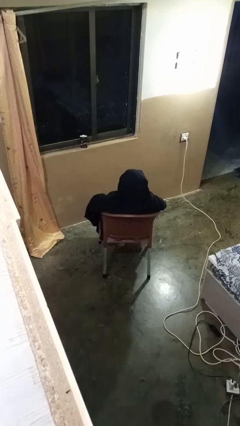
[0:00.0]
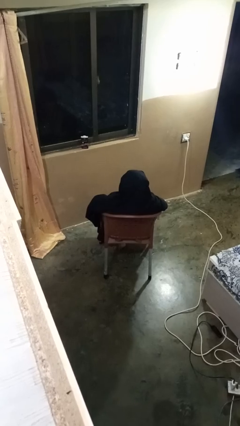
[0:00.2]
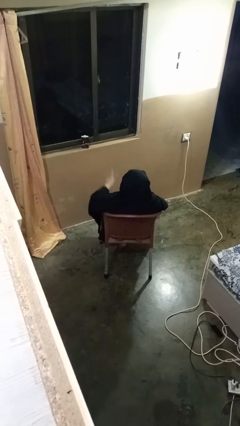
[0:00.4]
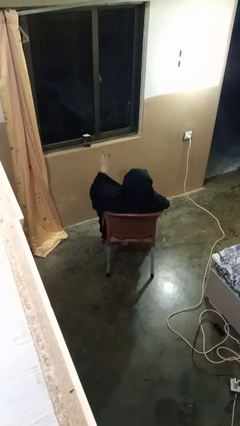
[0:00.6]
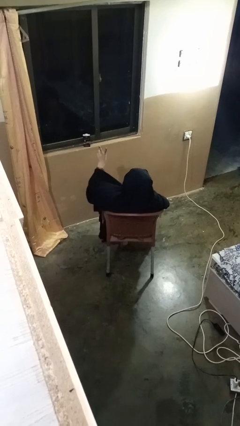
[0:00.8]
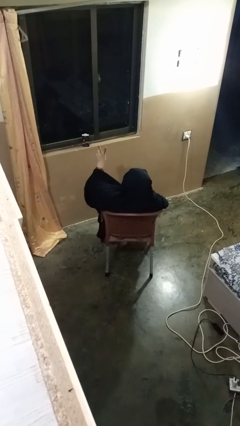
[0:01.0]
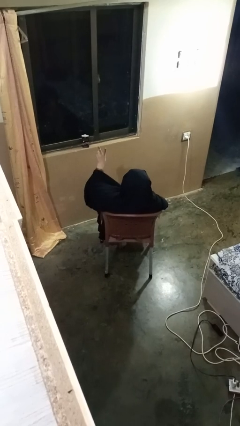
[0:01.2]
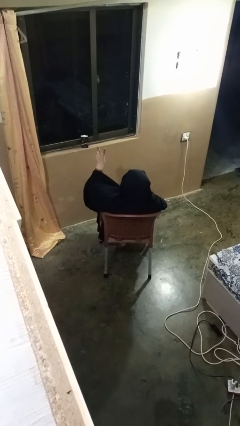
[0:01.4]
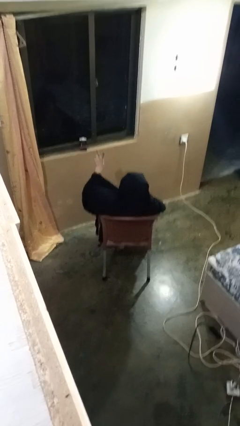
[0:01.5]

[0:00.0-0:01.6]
person gestures peace

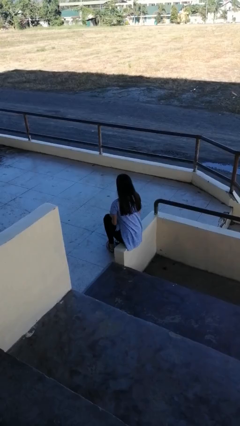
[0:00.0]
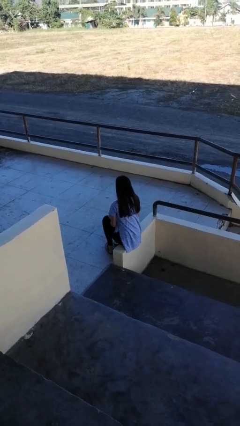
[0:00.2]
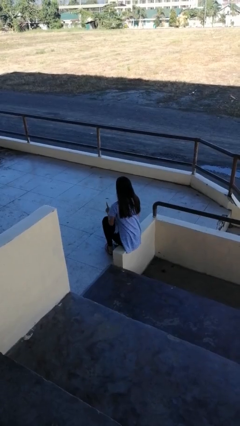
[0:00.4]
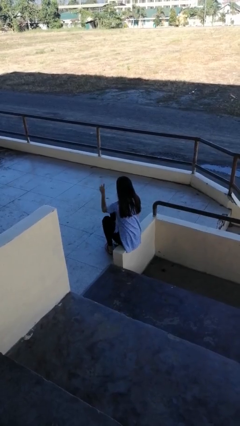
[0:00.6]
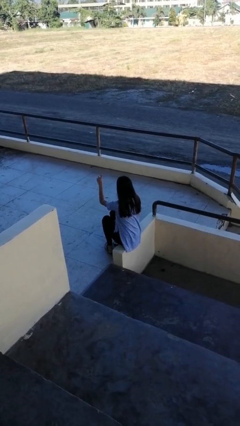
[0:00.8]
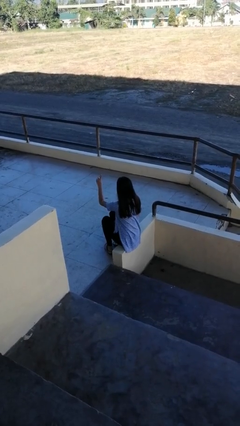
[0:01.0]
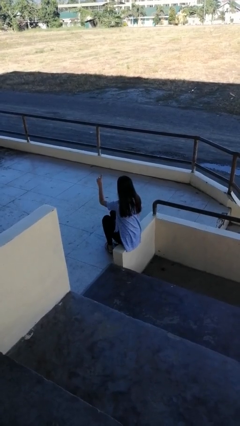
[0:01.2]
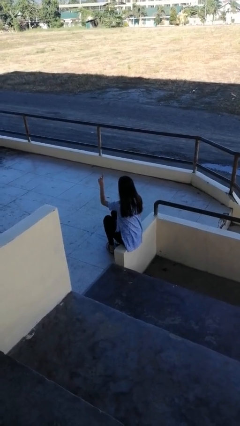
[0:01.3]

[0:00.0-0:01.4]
person gestures number one

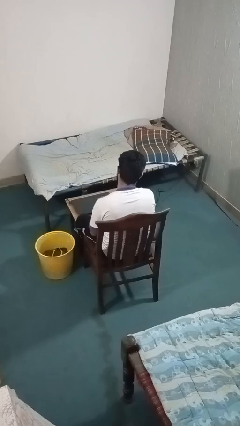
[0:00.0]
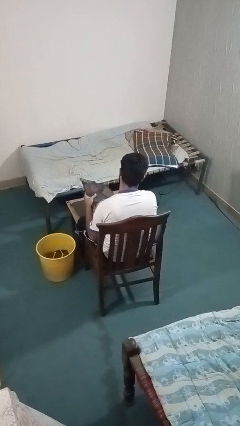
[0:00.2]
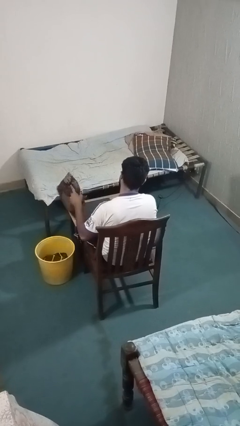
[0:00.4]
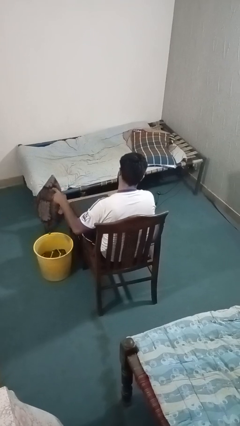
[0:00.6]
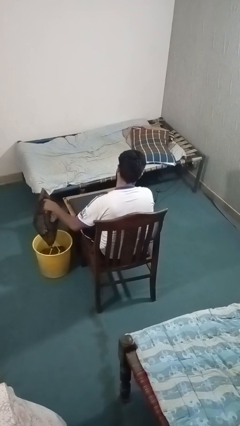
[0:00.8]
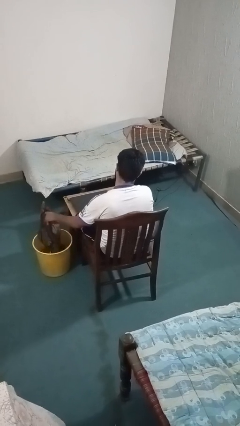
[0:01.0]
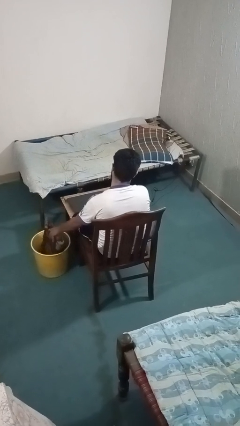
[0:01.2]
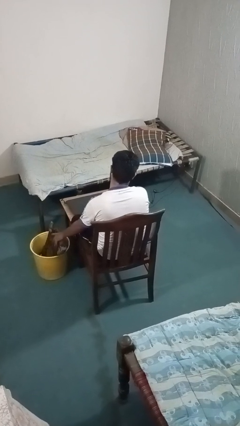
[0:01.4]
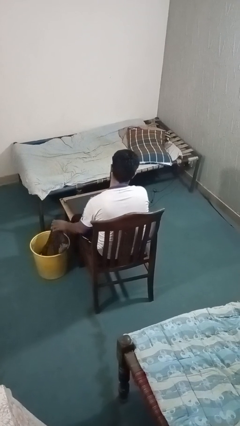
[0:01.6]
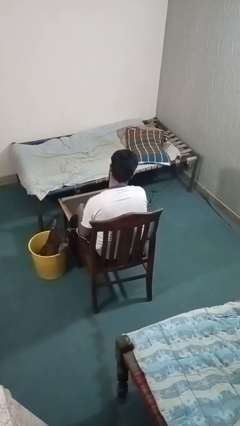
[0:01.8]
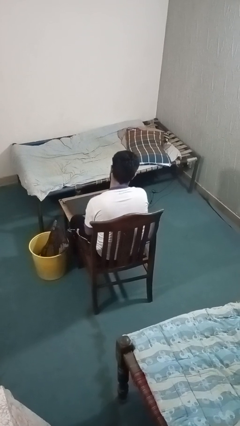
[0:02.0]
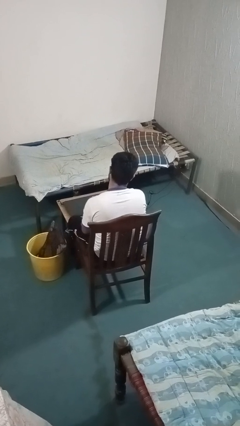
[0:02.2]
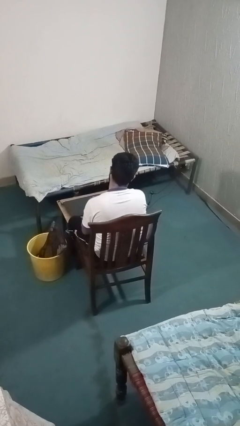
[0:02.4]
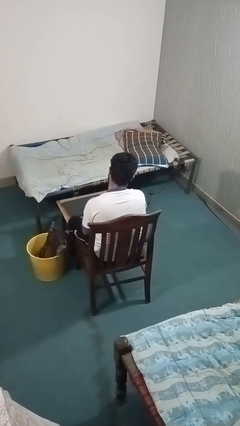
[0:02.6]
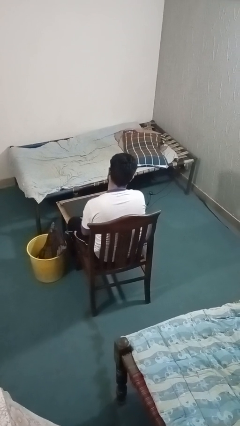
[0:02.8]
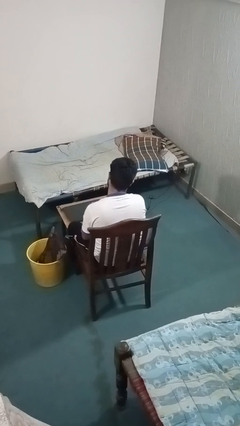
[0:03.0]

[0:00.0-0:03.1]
person puts object into basket

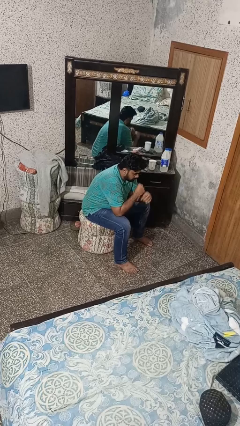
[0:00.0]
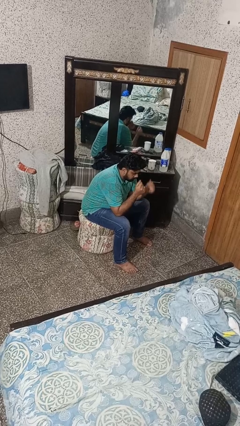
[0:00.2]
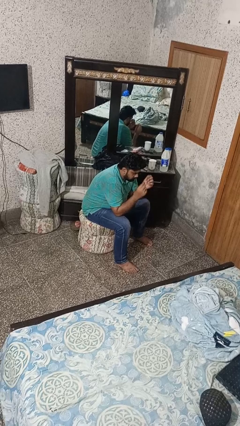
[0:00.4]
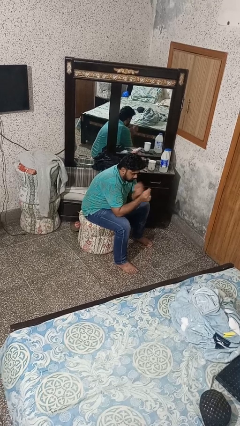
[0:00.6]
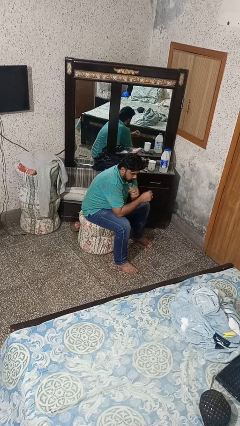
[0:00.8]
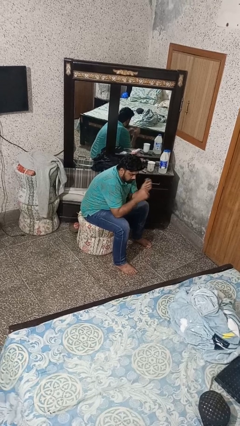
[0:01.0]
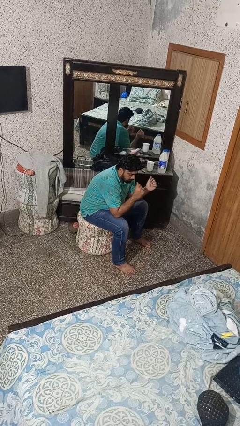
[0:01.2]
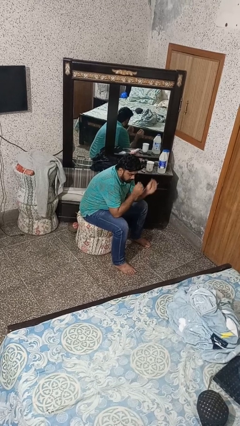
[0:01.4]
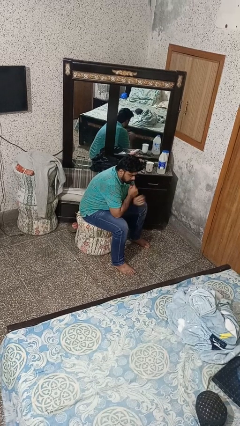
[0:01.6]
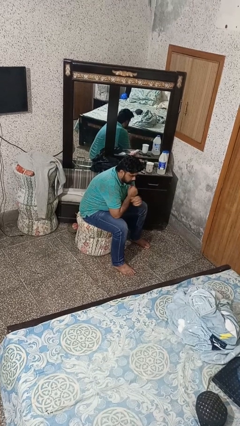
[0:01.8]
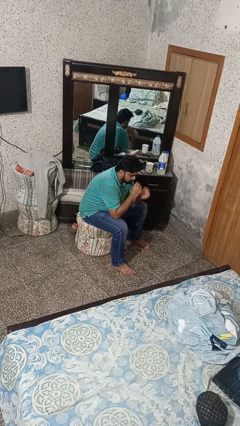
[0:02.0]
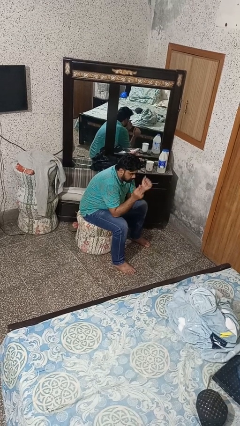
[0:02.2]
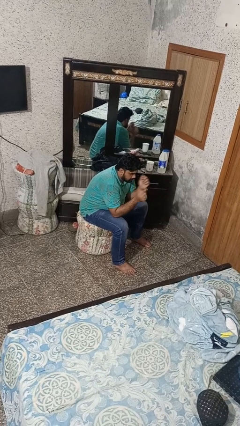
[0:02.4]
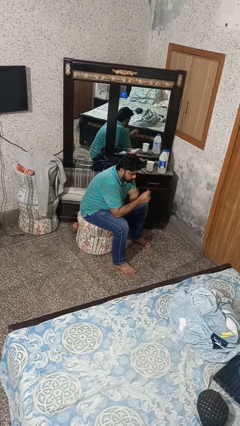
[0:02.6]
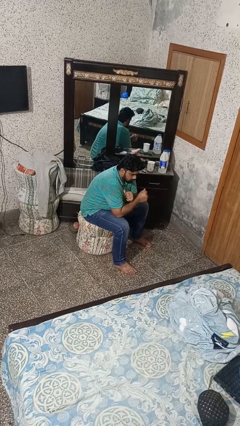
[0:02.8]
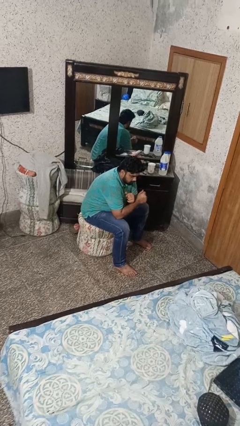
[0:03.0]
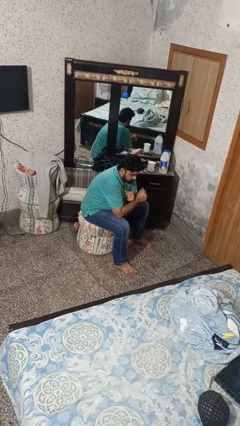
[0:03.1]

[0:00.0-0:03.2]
person snaps fingers

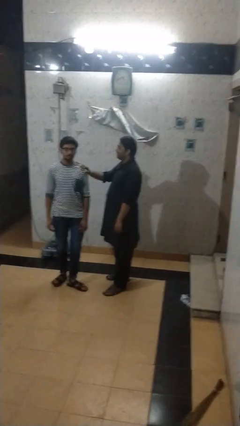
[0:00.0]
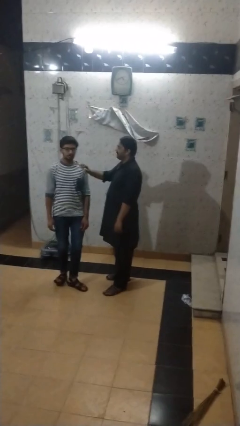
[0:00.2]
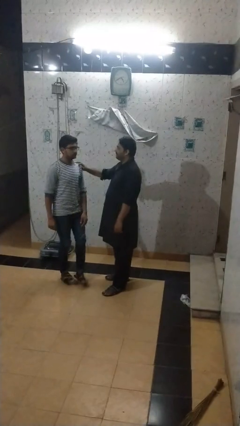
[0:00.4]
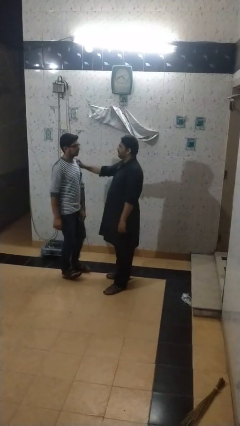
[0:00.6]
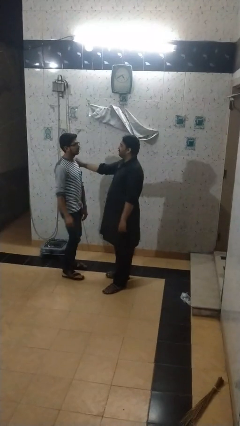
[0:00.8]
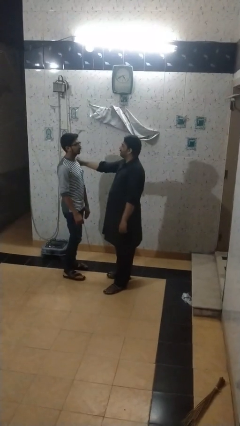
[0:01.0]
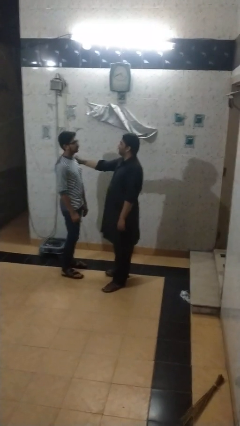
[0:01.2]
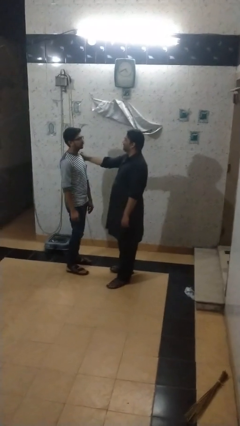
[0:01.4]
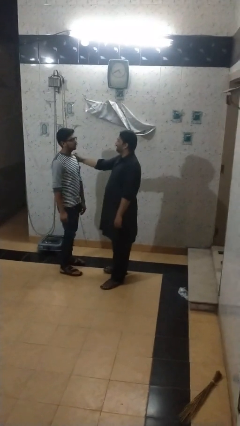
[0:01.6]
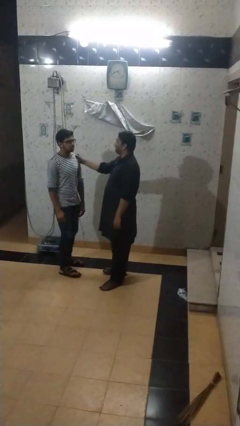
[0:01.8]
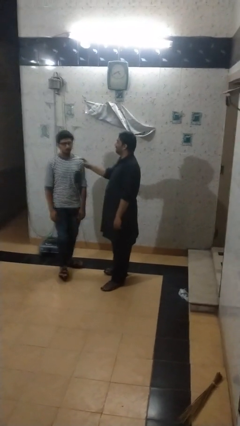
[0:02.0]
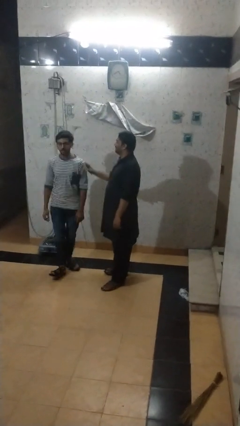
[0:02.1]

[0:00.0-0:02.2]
person spins person around

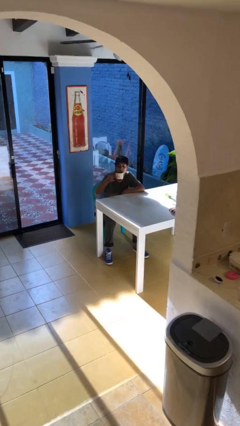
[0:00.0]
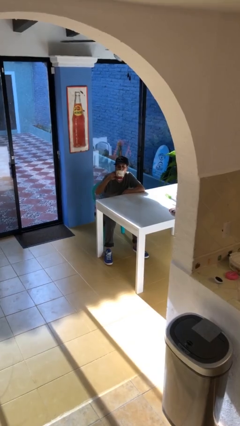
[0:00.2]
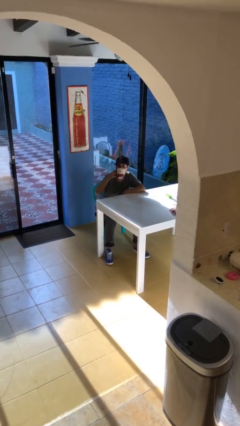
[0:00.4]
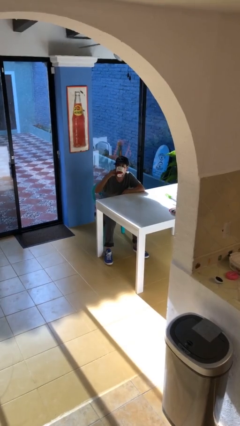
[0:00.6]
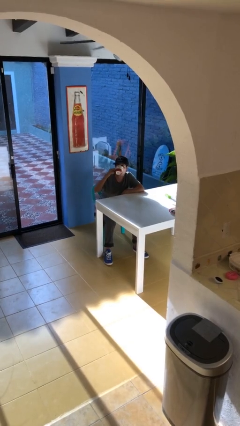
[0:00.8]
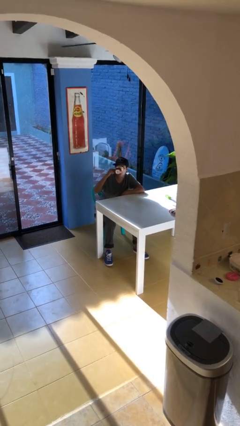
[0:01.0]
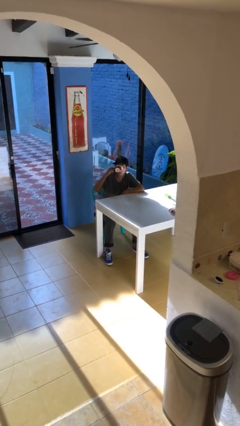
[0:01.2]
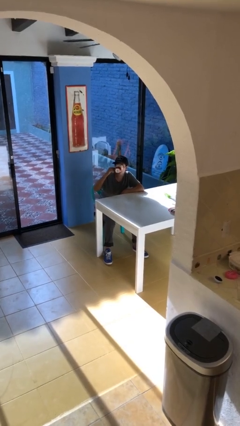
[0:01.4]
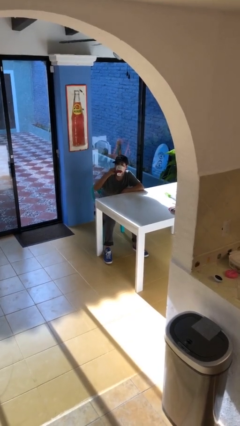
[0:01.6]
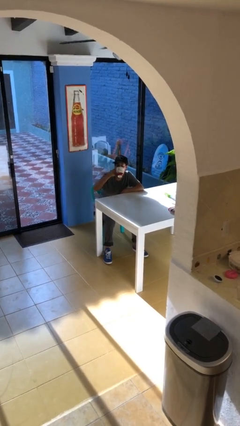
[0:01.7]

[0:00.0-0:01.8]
person drinks from mug

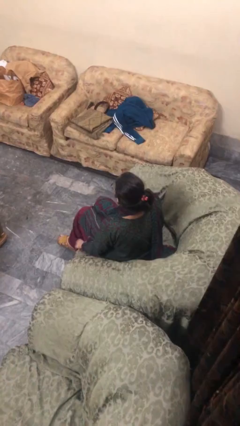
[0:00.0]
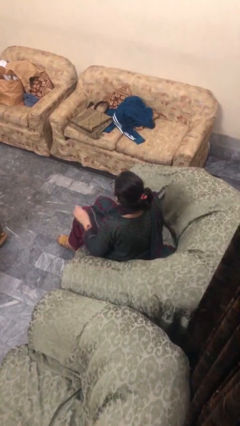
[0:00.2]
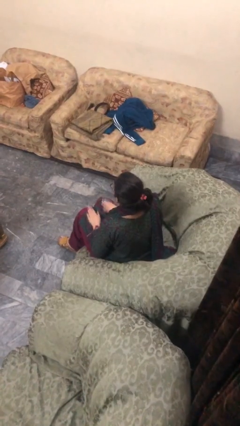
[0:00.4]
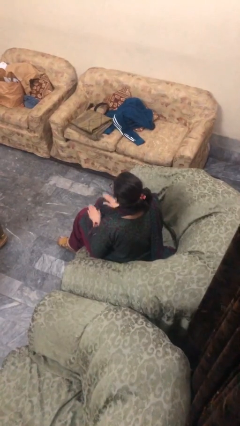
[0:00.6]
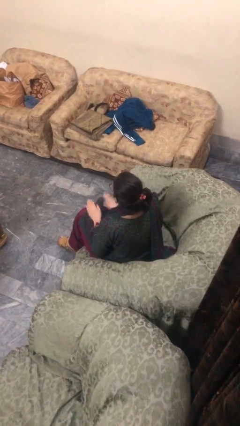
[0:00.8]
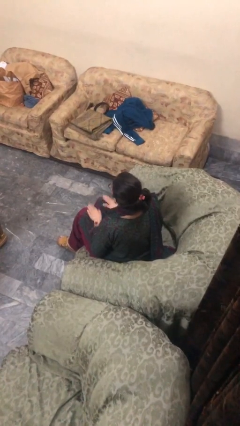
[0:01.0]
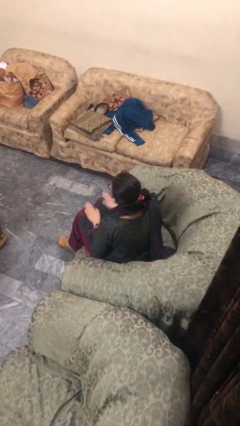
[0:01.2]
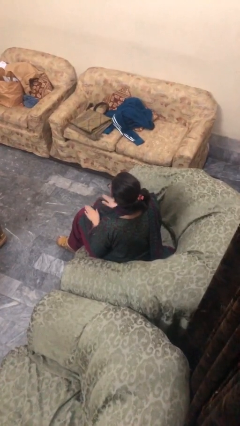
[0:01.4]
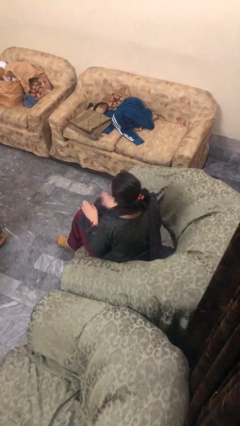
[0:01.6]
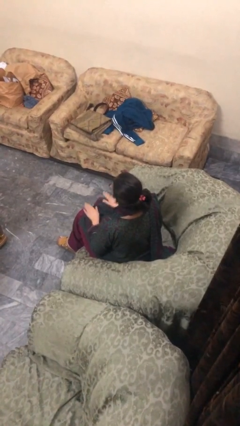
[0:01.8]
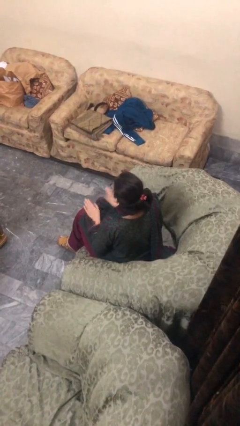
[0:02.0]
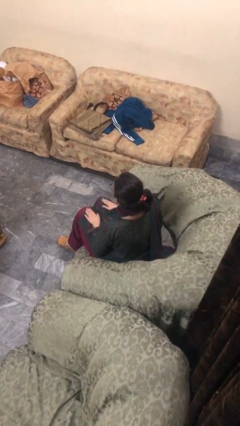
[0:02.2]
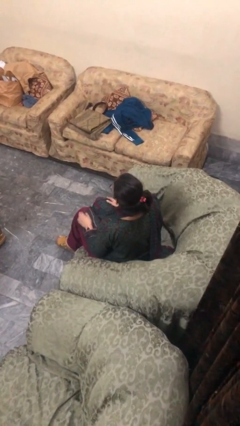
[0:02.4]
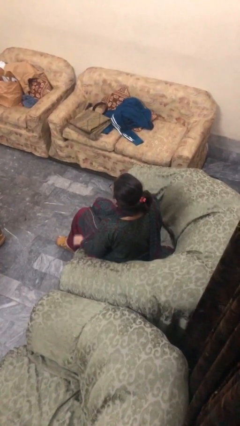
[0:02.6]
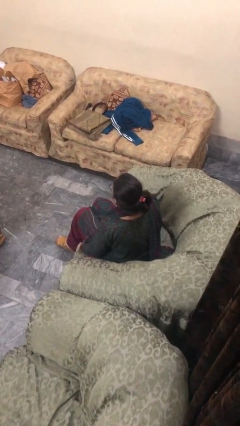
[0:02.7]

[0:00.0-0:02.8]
person slaps hands on thighs

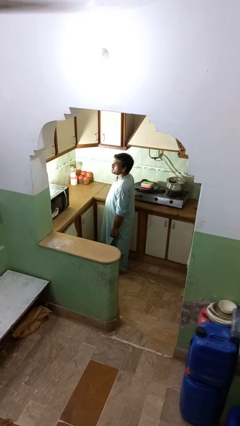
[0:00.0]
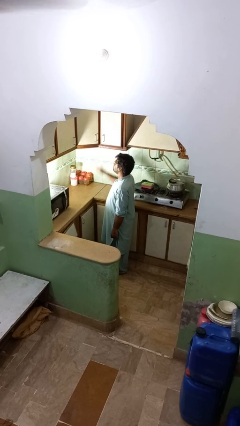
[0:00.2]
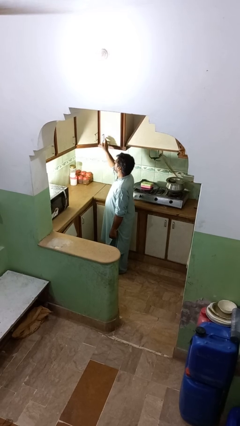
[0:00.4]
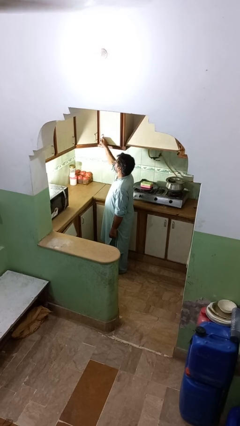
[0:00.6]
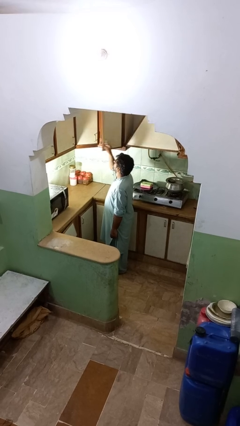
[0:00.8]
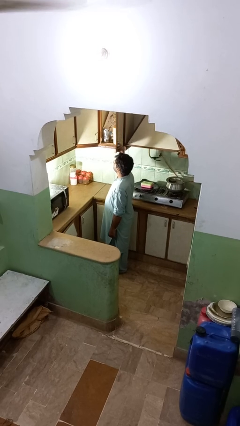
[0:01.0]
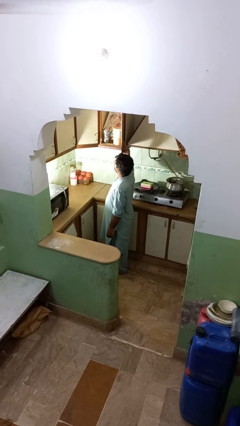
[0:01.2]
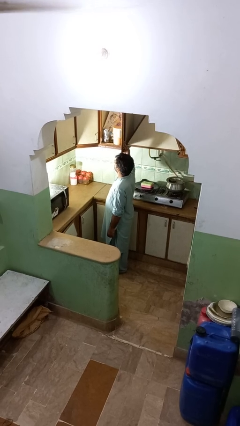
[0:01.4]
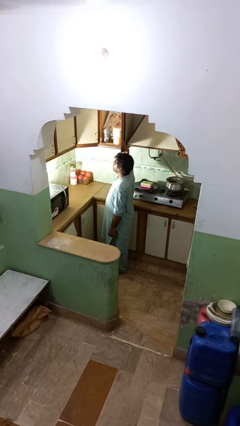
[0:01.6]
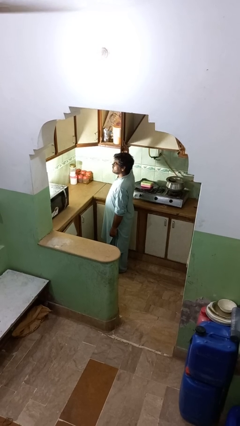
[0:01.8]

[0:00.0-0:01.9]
person opens kitchen drawer
